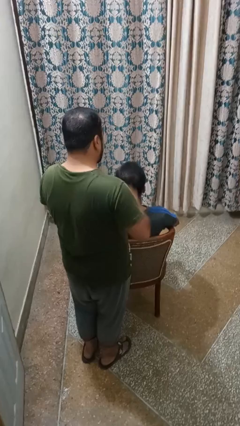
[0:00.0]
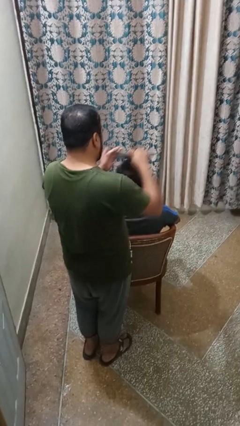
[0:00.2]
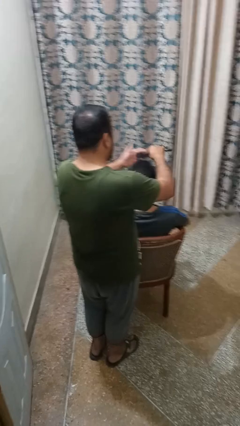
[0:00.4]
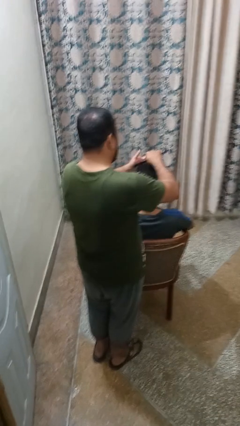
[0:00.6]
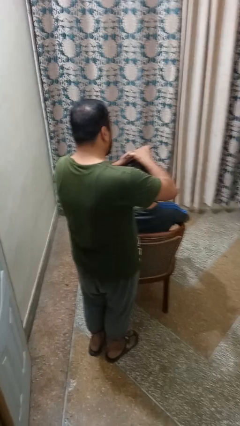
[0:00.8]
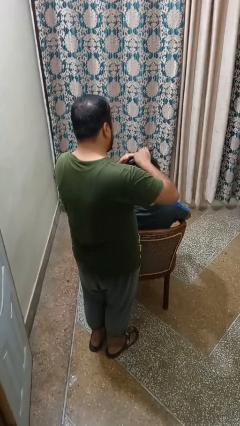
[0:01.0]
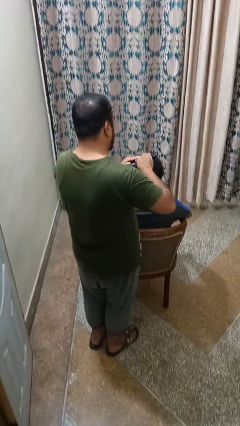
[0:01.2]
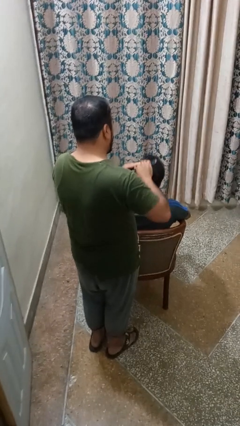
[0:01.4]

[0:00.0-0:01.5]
person brushes hair of person

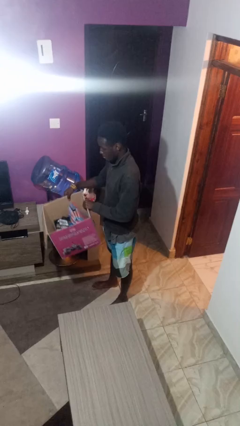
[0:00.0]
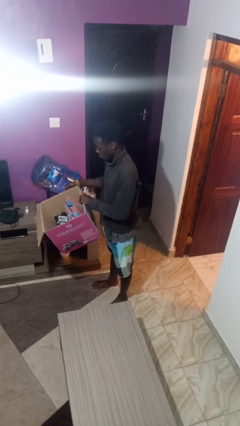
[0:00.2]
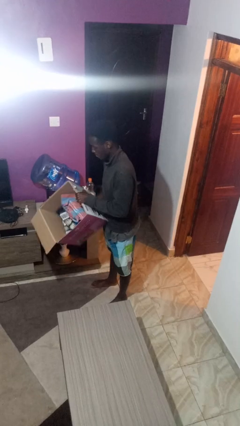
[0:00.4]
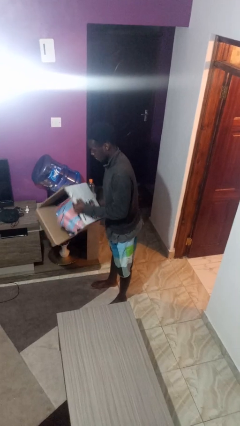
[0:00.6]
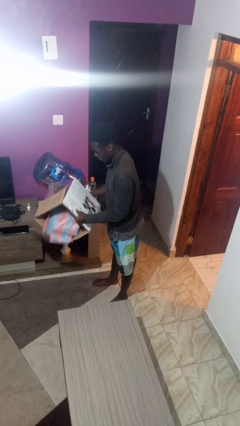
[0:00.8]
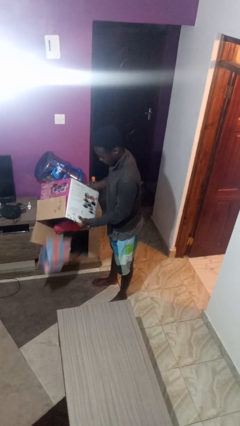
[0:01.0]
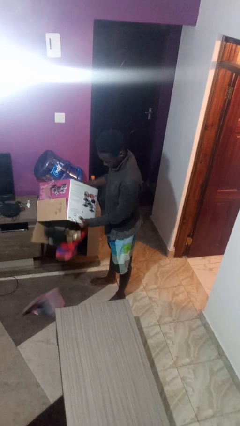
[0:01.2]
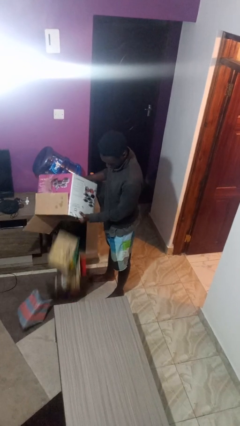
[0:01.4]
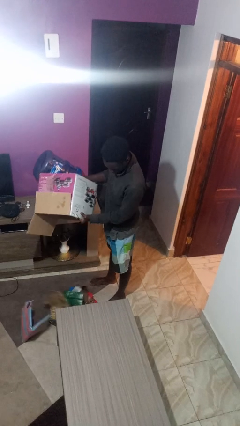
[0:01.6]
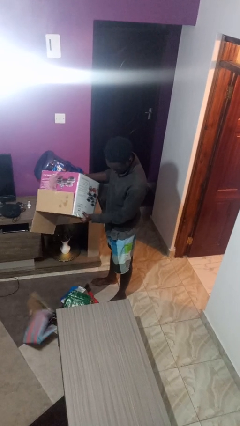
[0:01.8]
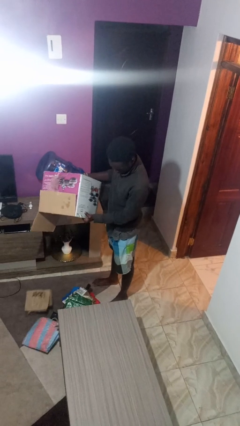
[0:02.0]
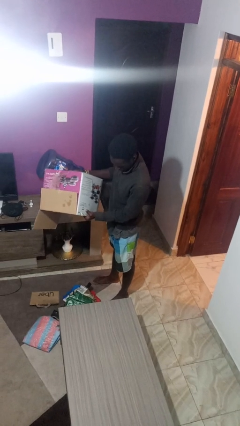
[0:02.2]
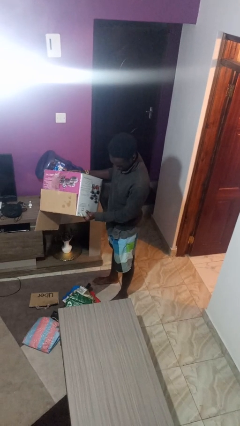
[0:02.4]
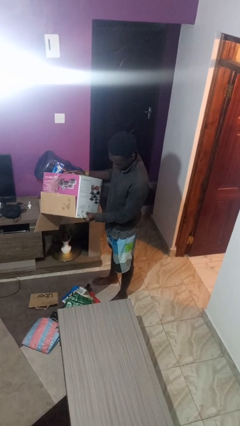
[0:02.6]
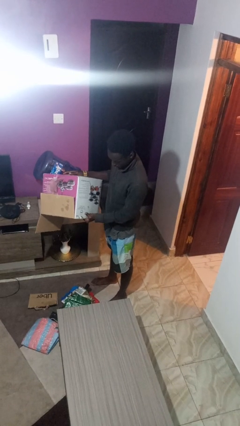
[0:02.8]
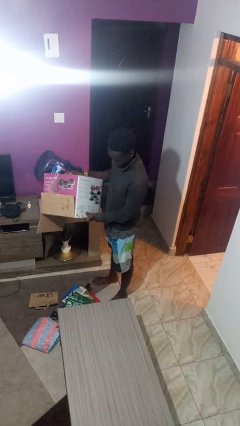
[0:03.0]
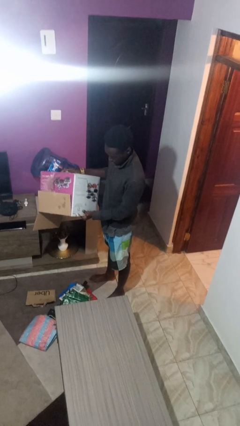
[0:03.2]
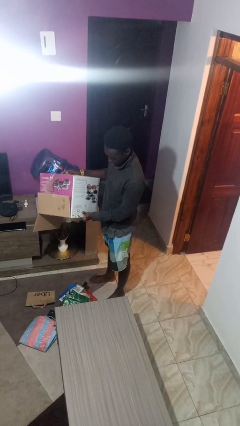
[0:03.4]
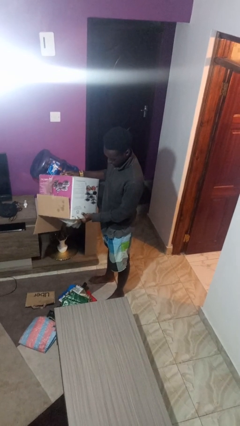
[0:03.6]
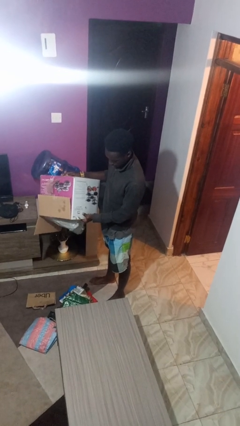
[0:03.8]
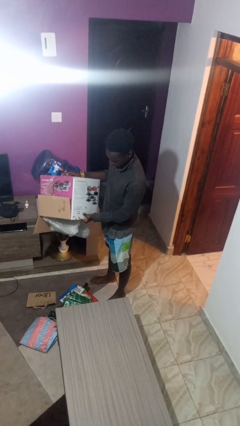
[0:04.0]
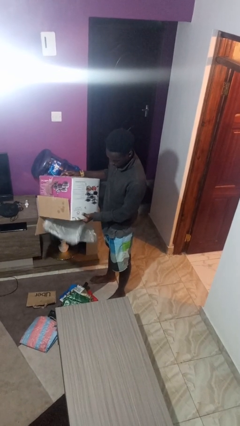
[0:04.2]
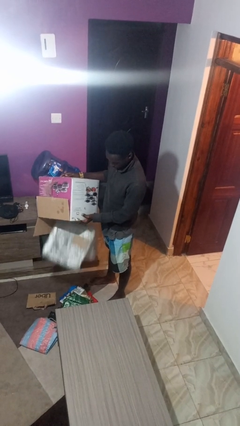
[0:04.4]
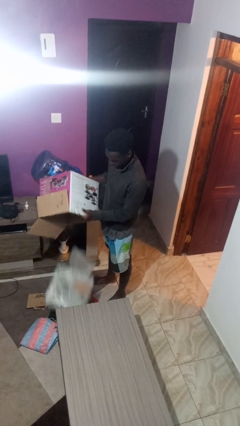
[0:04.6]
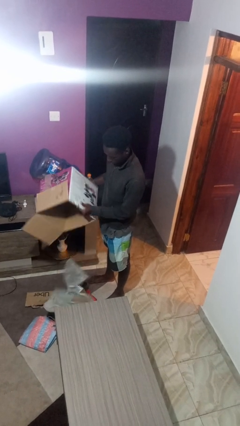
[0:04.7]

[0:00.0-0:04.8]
person unloads box onto floor

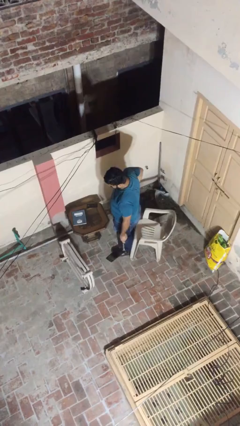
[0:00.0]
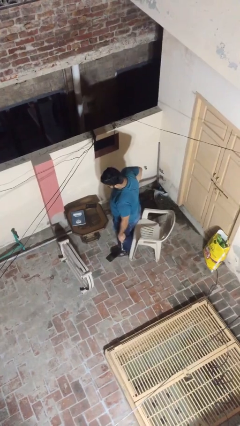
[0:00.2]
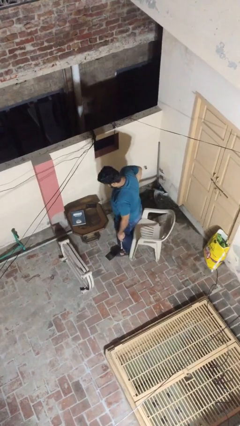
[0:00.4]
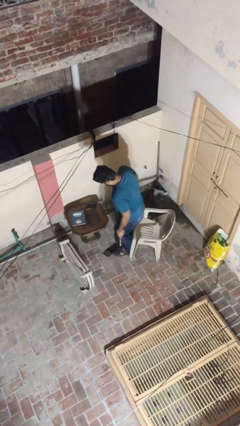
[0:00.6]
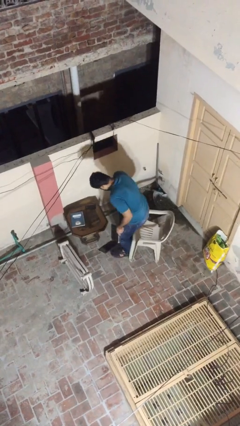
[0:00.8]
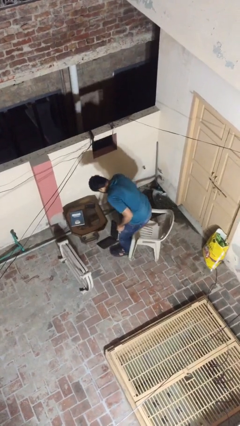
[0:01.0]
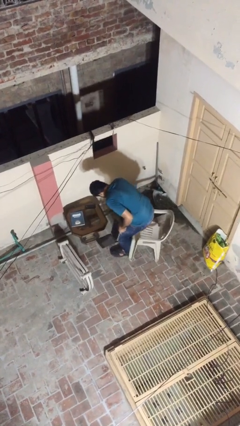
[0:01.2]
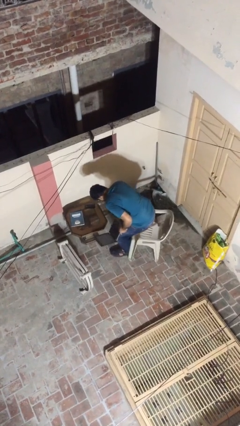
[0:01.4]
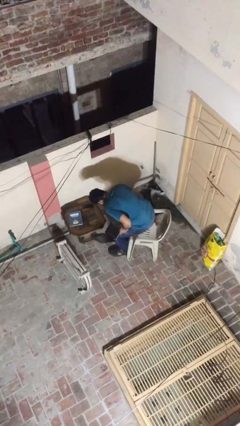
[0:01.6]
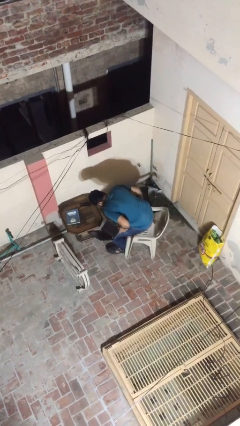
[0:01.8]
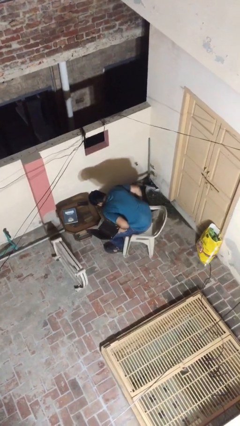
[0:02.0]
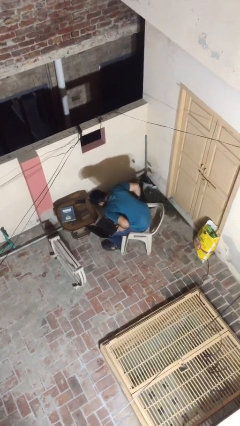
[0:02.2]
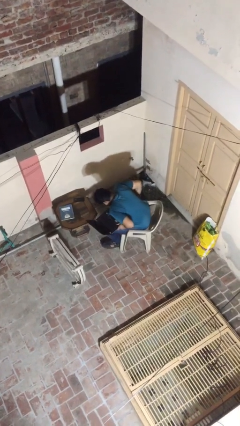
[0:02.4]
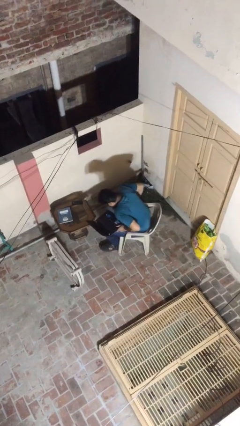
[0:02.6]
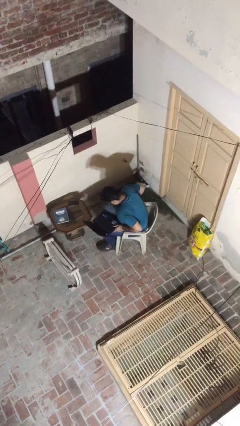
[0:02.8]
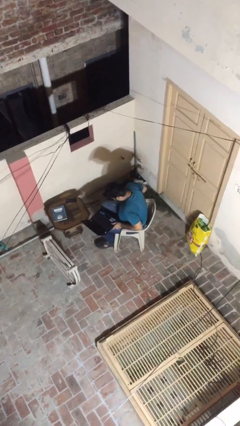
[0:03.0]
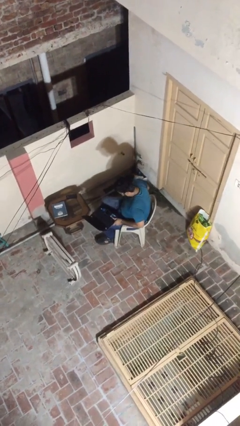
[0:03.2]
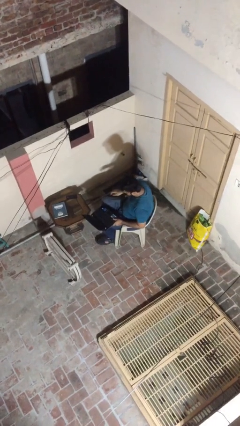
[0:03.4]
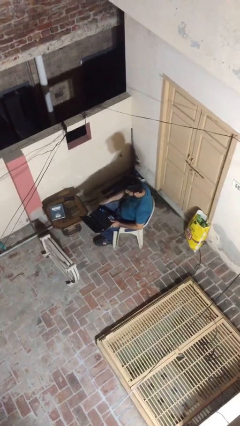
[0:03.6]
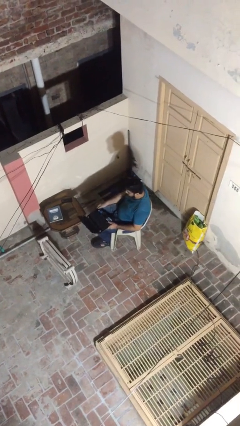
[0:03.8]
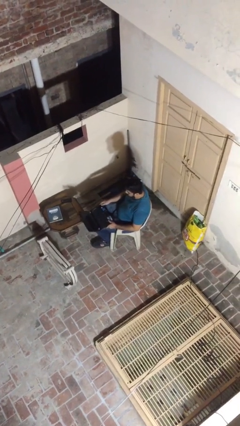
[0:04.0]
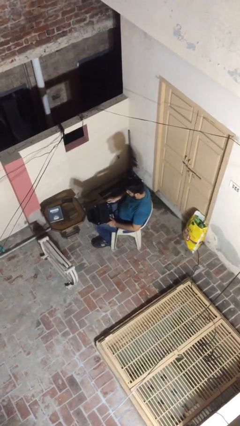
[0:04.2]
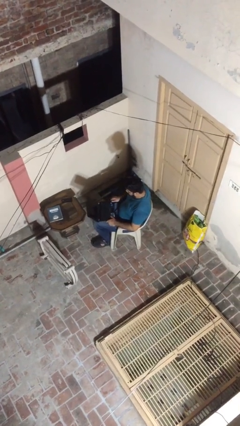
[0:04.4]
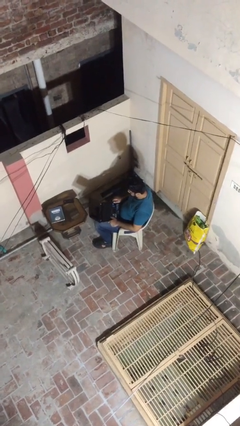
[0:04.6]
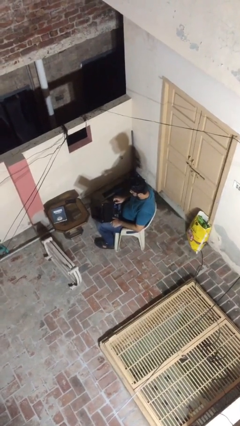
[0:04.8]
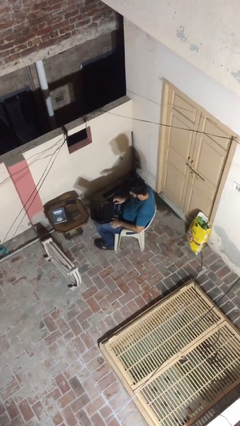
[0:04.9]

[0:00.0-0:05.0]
person sits down

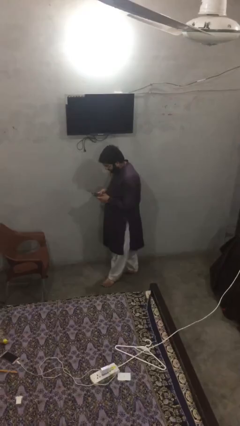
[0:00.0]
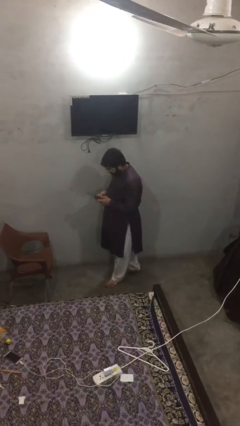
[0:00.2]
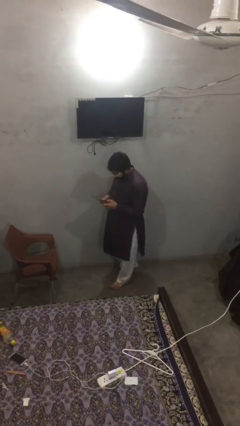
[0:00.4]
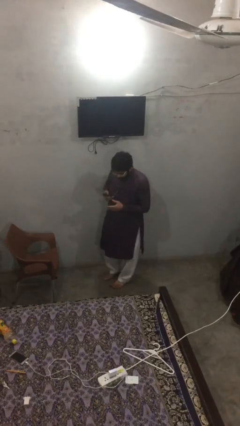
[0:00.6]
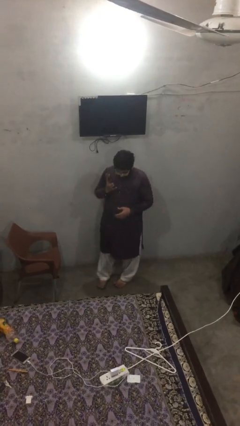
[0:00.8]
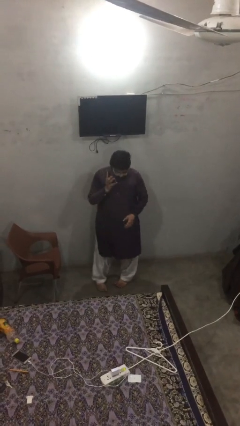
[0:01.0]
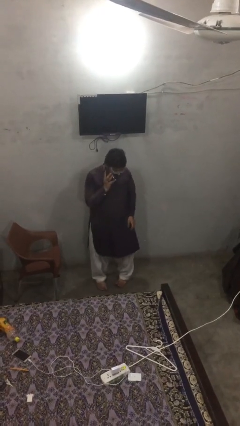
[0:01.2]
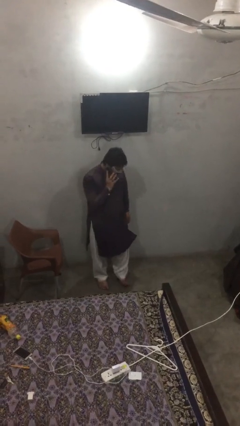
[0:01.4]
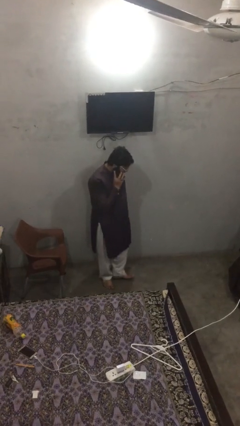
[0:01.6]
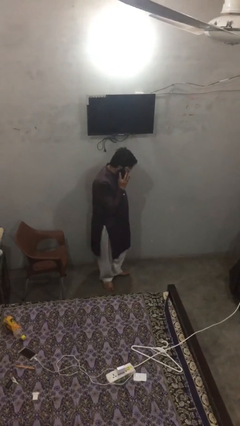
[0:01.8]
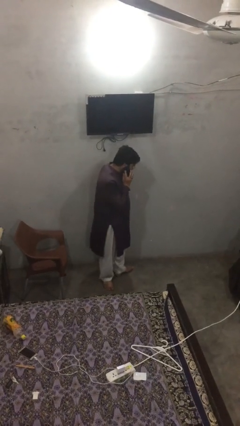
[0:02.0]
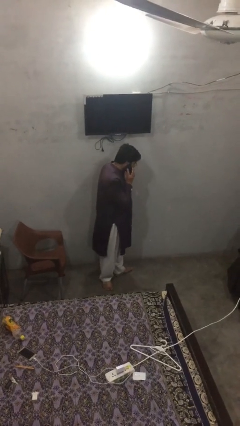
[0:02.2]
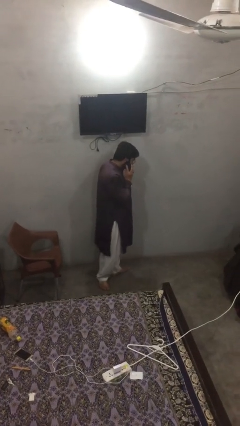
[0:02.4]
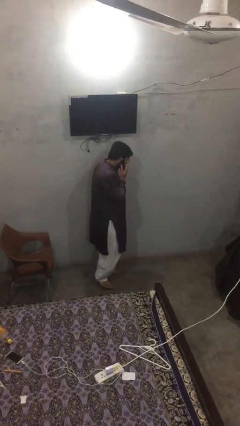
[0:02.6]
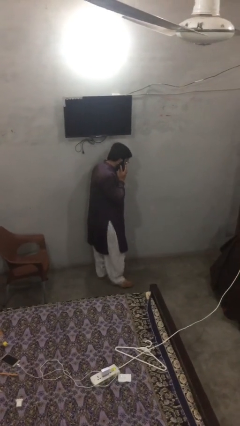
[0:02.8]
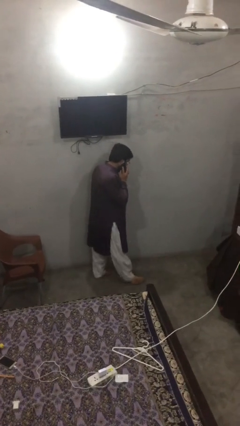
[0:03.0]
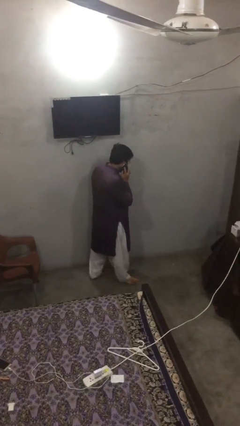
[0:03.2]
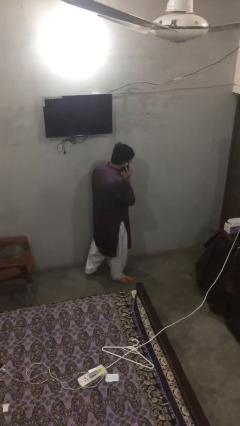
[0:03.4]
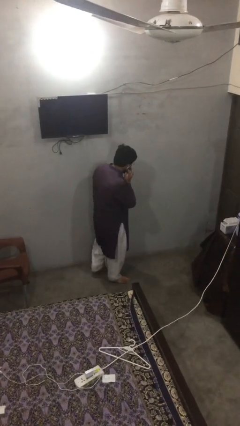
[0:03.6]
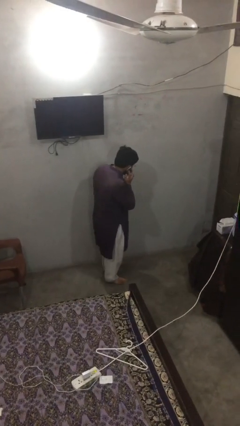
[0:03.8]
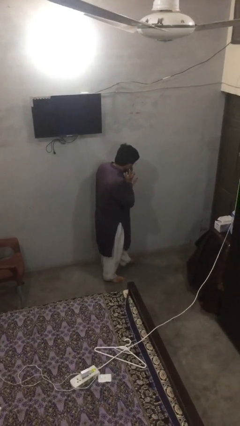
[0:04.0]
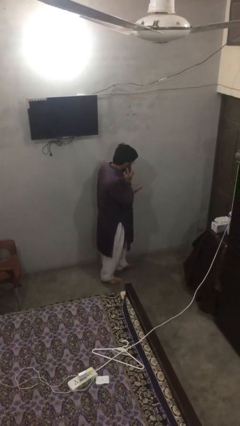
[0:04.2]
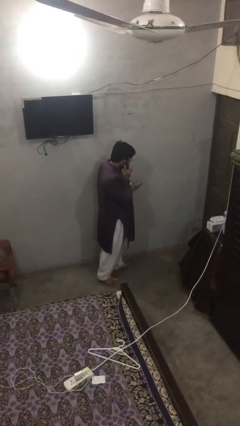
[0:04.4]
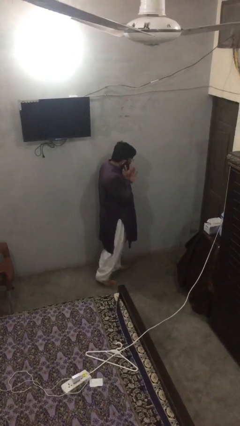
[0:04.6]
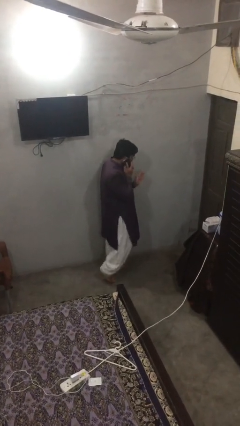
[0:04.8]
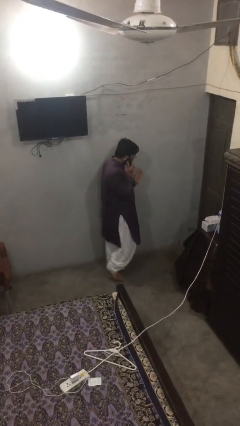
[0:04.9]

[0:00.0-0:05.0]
person talks on phone

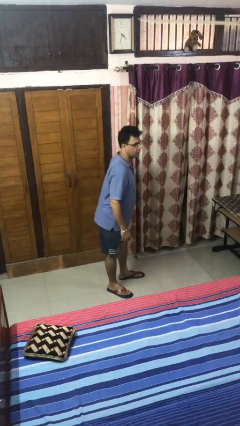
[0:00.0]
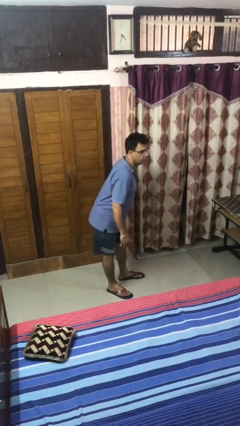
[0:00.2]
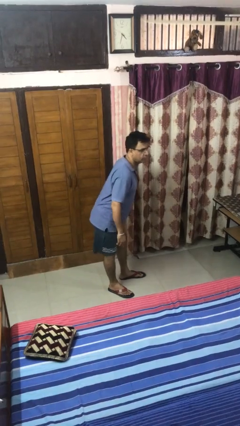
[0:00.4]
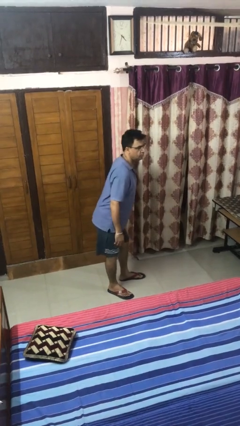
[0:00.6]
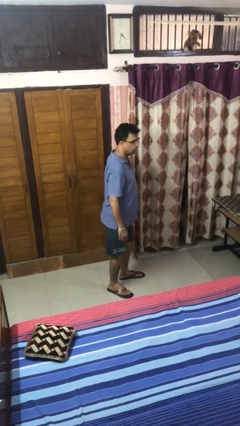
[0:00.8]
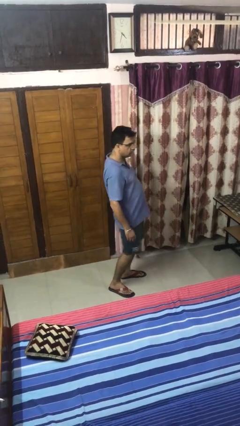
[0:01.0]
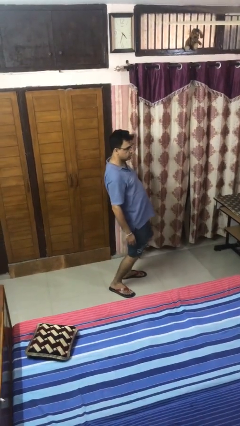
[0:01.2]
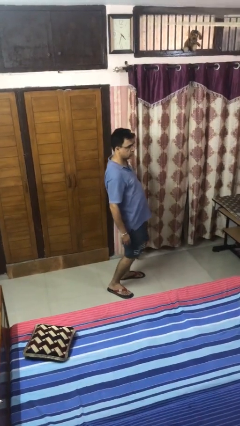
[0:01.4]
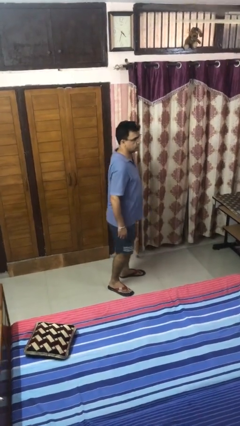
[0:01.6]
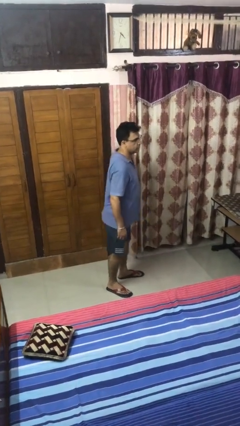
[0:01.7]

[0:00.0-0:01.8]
person wiggles hips
